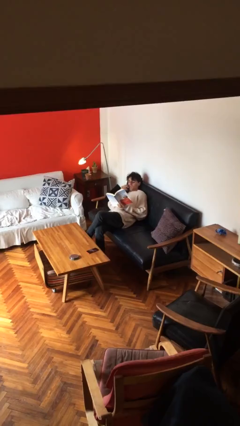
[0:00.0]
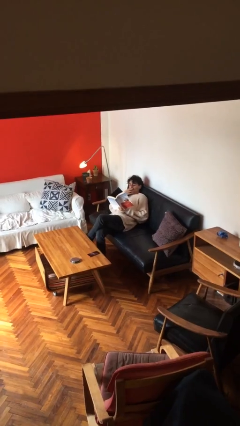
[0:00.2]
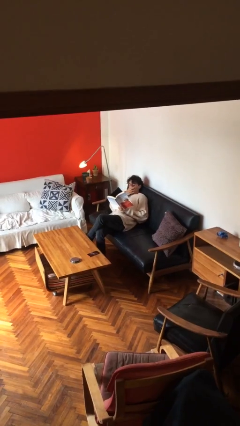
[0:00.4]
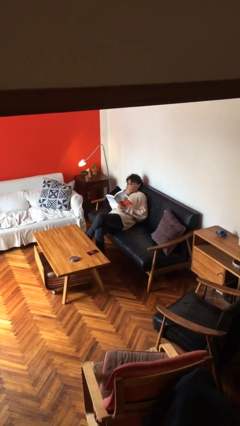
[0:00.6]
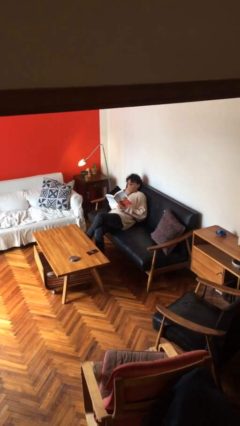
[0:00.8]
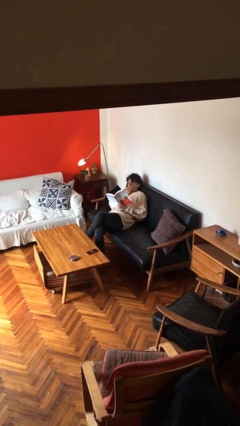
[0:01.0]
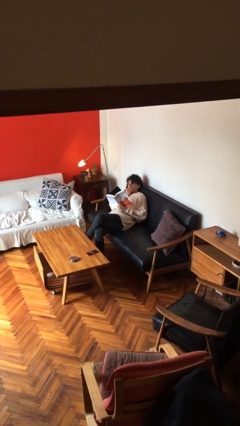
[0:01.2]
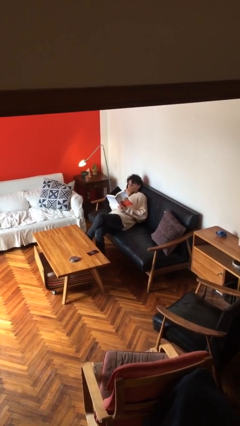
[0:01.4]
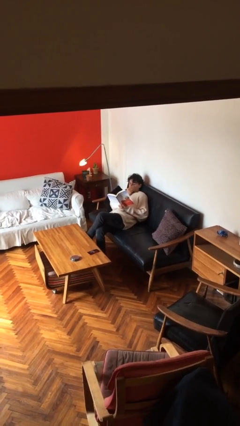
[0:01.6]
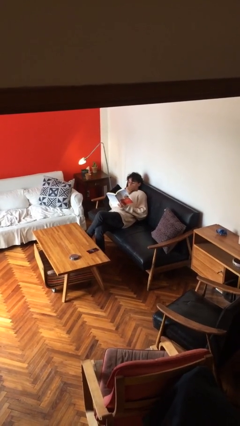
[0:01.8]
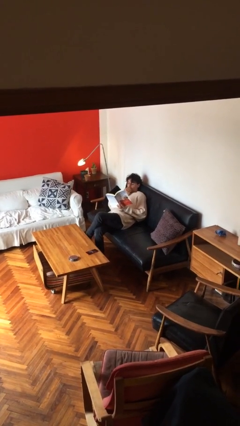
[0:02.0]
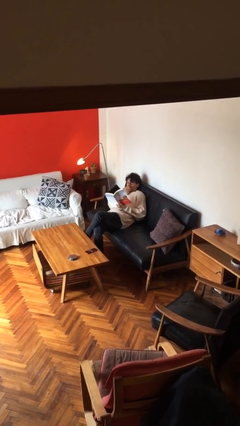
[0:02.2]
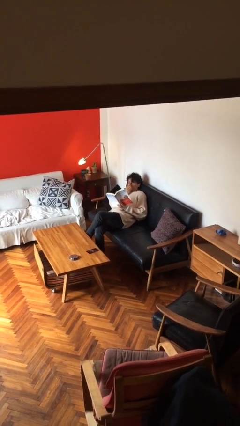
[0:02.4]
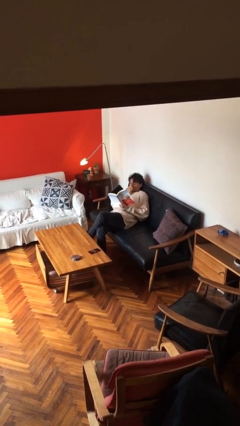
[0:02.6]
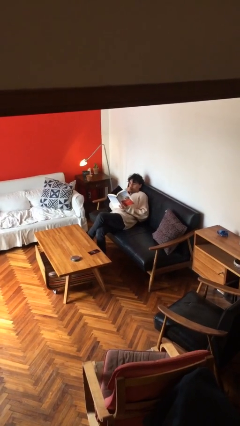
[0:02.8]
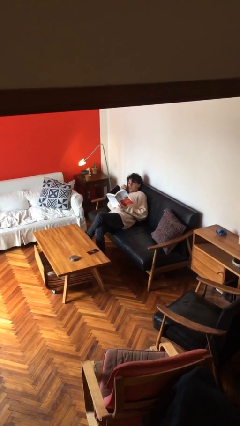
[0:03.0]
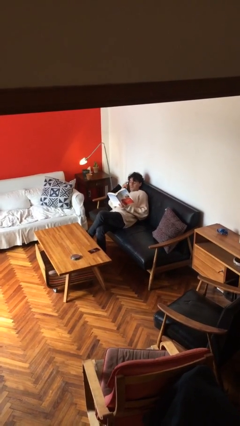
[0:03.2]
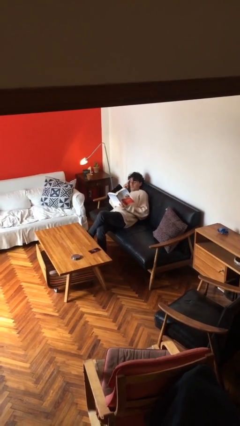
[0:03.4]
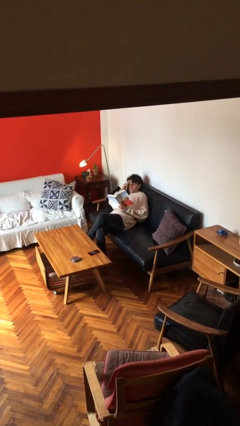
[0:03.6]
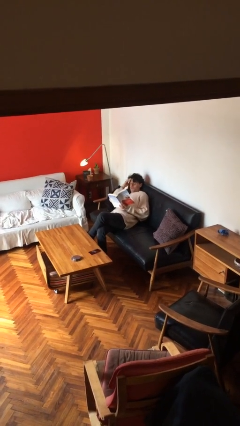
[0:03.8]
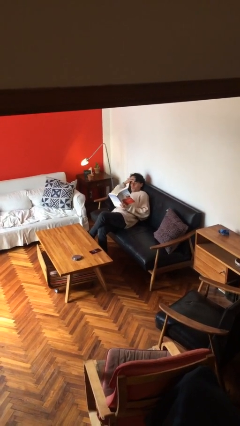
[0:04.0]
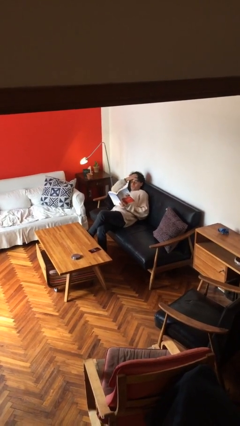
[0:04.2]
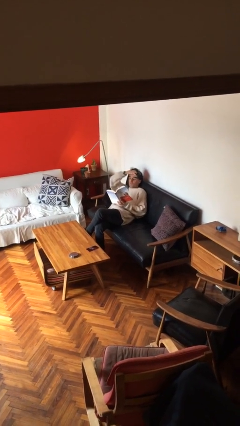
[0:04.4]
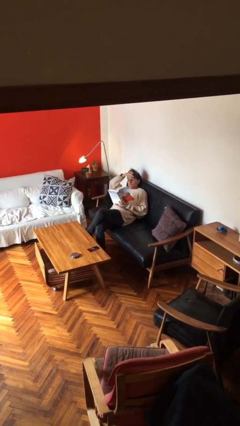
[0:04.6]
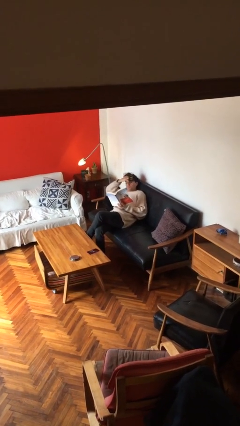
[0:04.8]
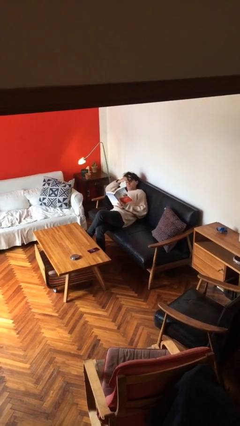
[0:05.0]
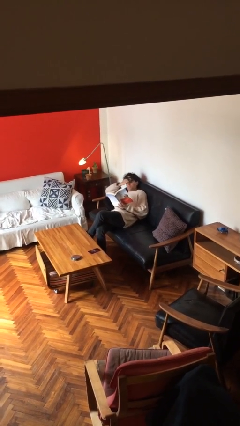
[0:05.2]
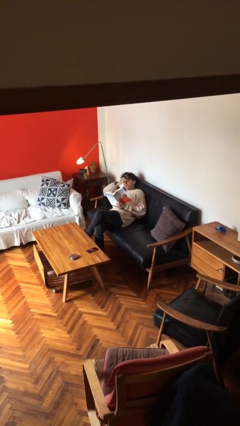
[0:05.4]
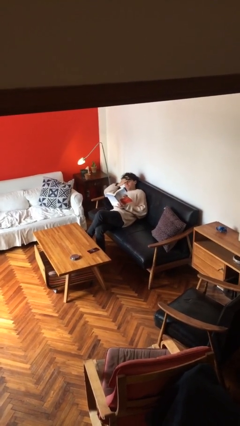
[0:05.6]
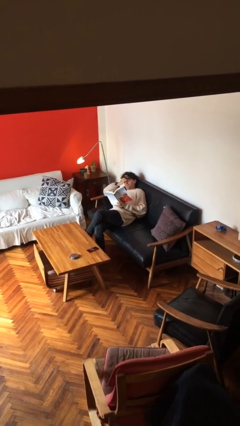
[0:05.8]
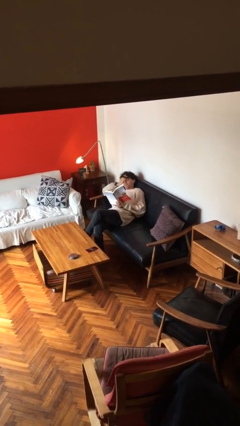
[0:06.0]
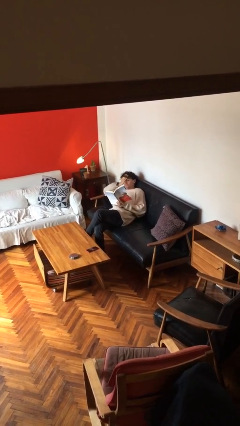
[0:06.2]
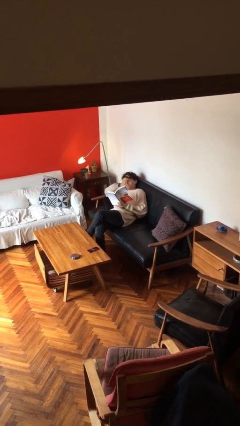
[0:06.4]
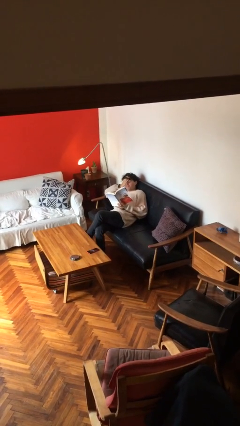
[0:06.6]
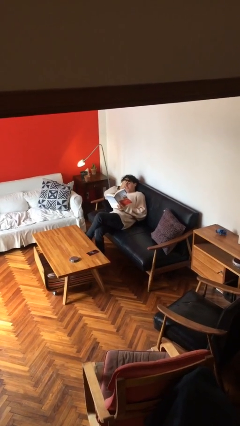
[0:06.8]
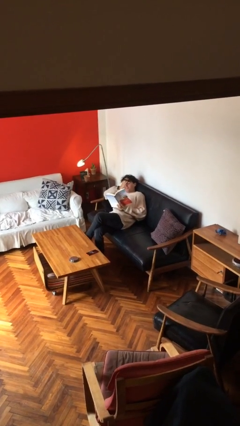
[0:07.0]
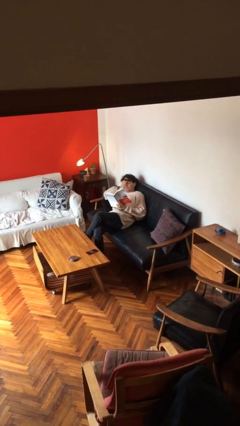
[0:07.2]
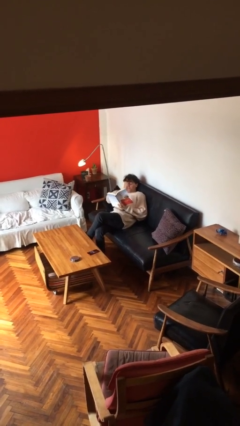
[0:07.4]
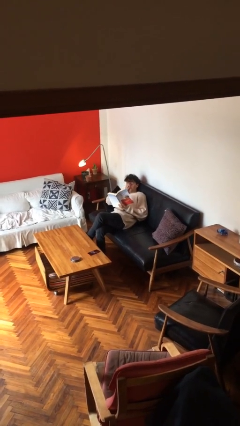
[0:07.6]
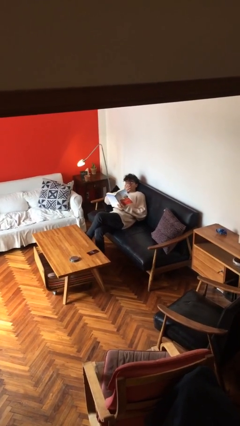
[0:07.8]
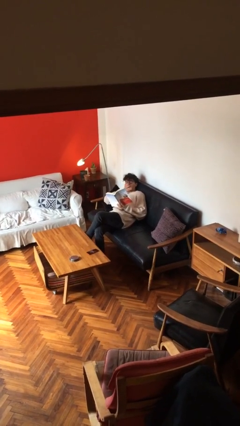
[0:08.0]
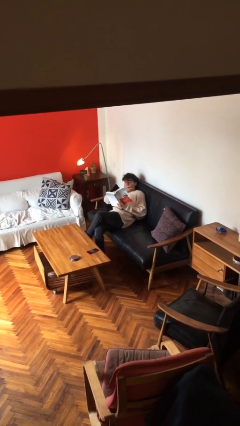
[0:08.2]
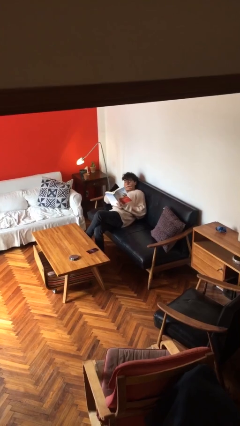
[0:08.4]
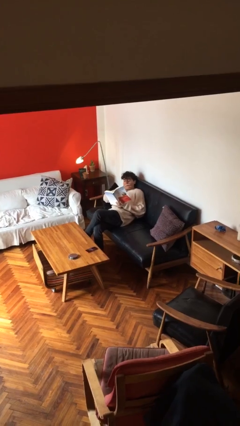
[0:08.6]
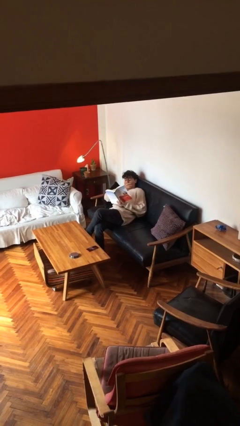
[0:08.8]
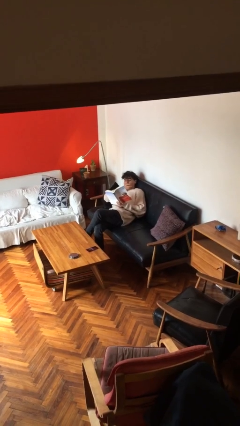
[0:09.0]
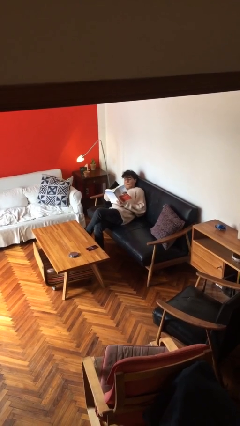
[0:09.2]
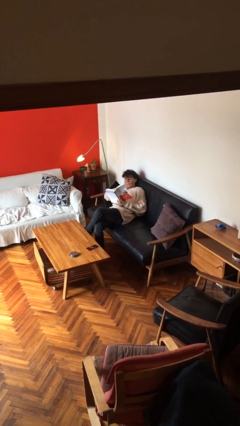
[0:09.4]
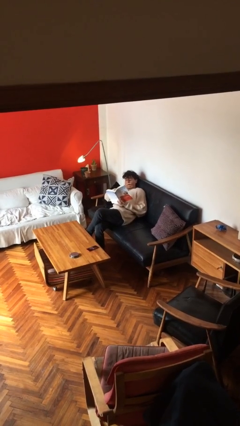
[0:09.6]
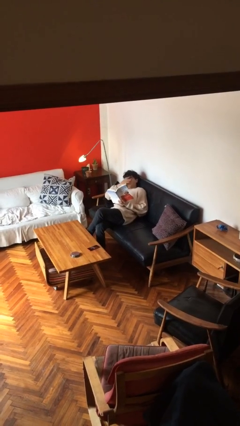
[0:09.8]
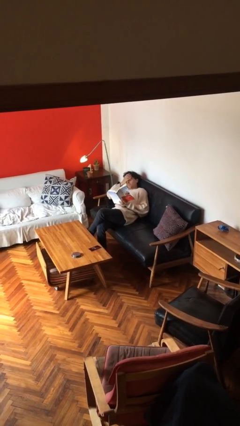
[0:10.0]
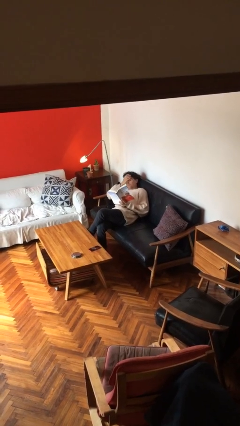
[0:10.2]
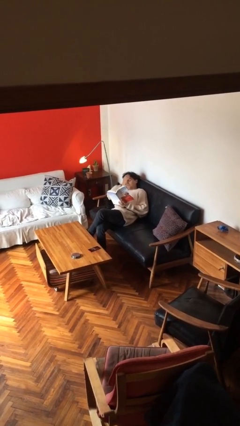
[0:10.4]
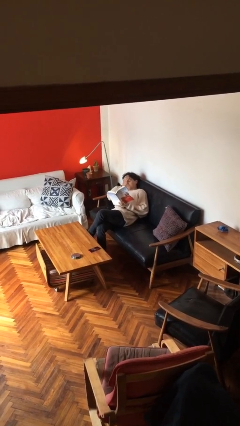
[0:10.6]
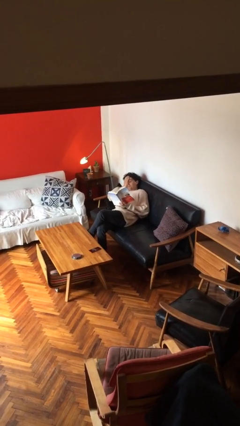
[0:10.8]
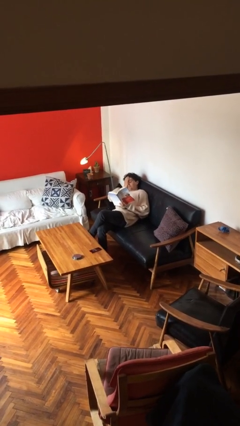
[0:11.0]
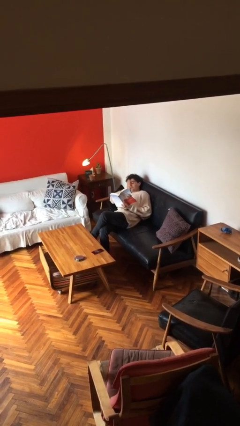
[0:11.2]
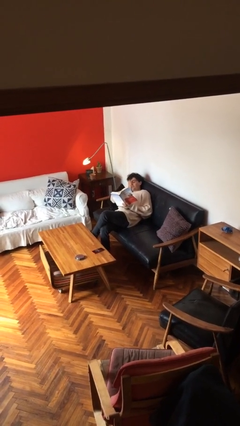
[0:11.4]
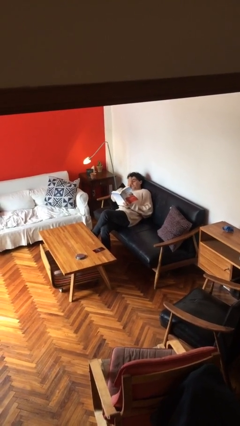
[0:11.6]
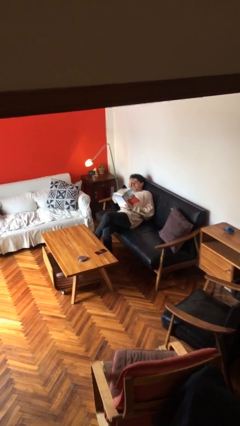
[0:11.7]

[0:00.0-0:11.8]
person reads document

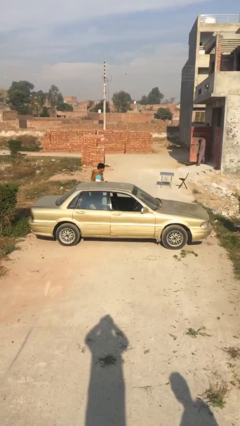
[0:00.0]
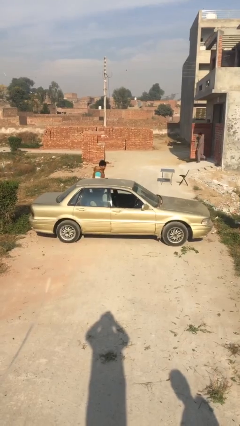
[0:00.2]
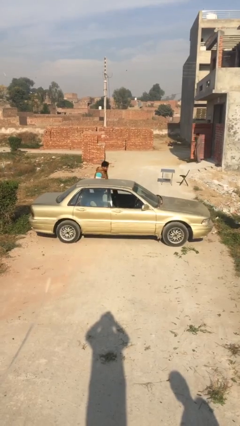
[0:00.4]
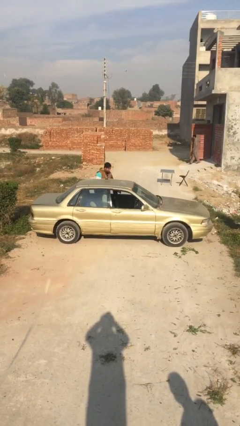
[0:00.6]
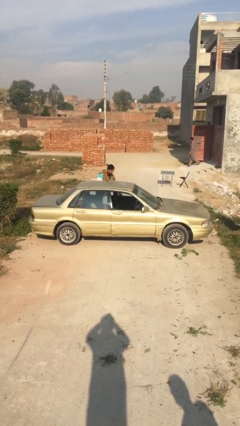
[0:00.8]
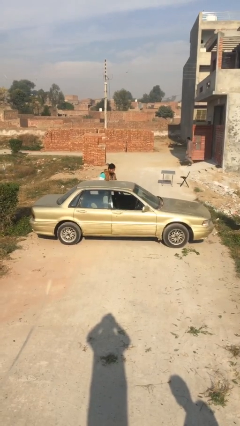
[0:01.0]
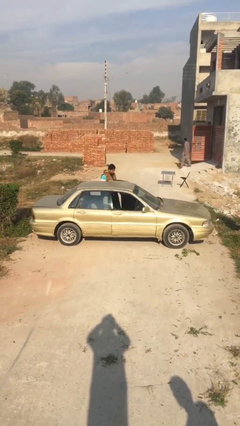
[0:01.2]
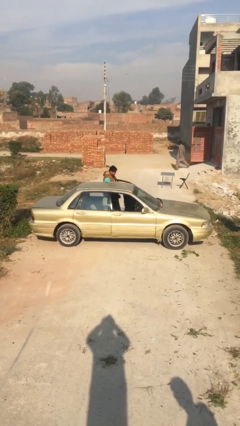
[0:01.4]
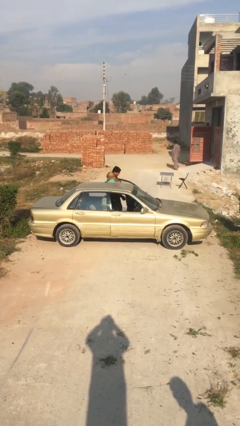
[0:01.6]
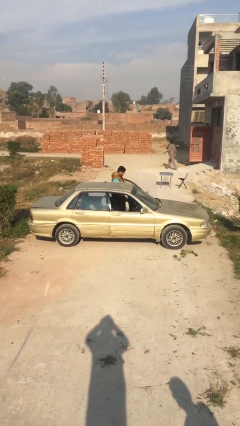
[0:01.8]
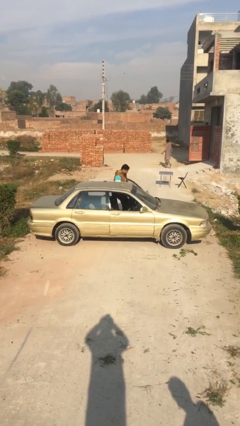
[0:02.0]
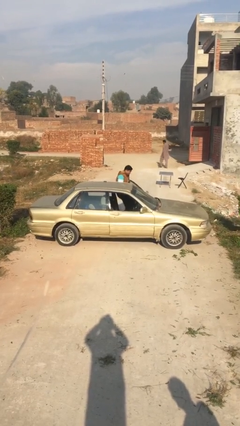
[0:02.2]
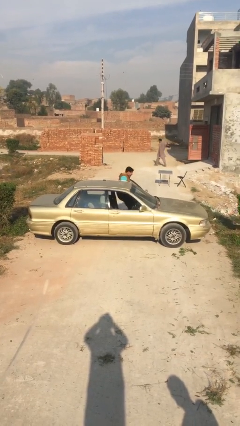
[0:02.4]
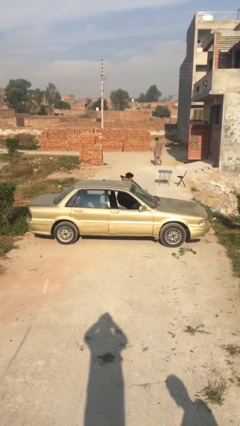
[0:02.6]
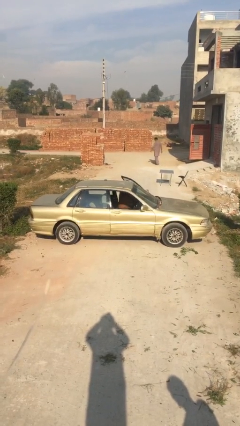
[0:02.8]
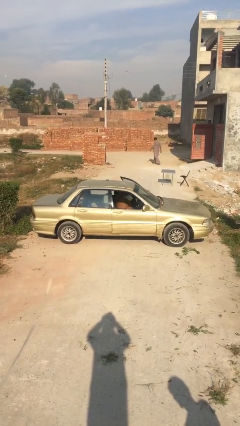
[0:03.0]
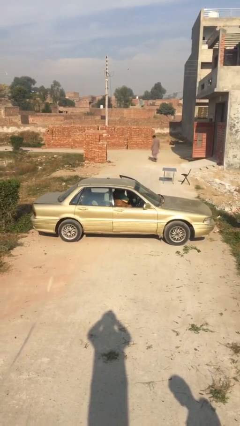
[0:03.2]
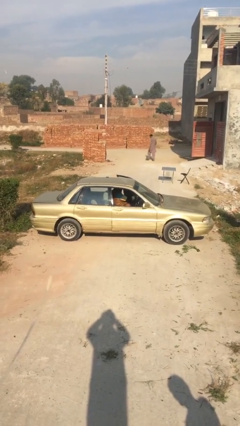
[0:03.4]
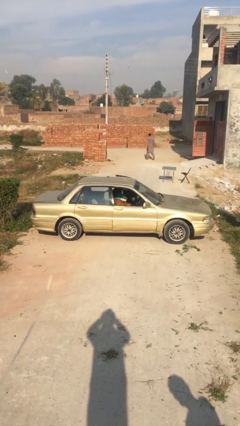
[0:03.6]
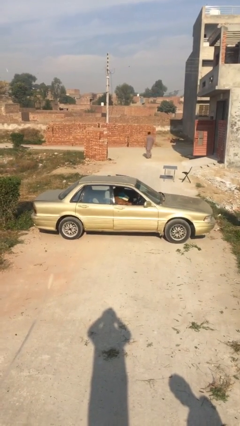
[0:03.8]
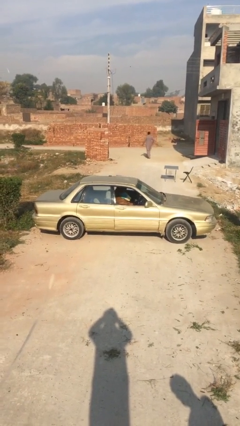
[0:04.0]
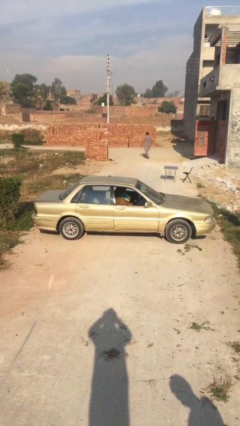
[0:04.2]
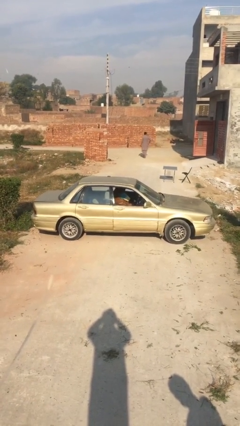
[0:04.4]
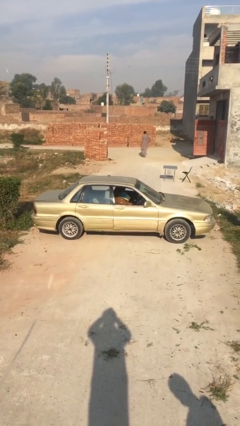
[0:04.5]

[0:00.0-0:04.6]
car picks up person

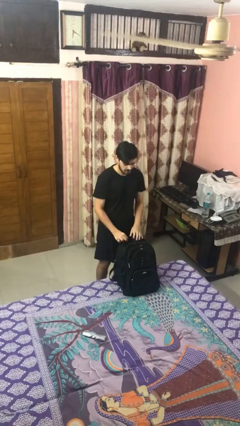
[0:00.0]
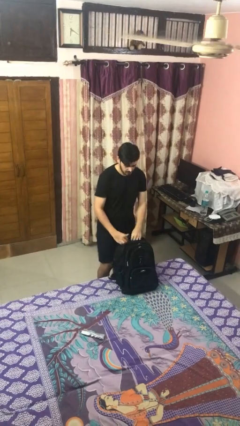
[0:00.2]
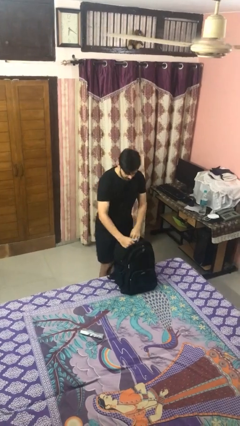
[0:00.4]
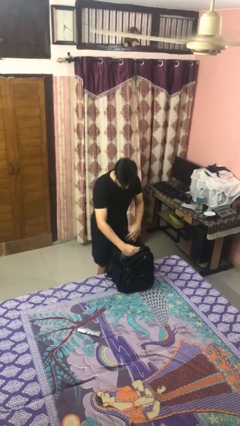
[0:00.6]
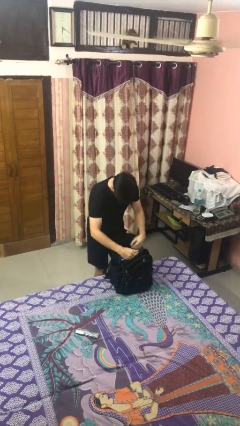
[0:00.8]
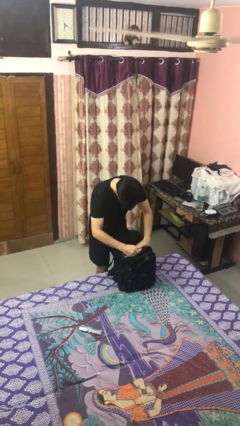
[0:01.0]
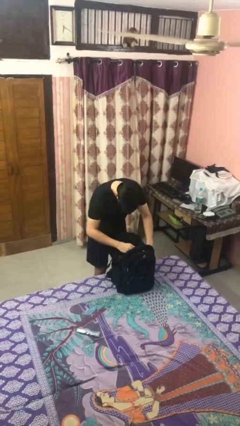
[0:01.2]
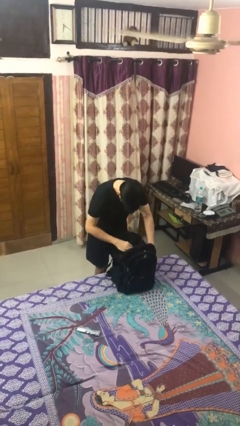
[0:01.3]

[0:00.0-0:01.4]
person searches in backpack

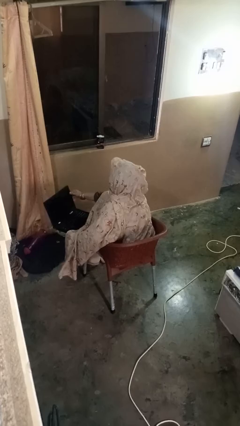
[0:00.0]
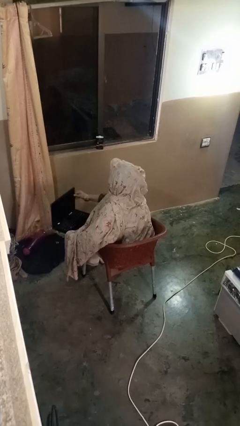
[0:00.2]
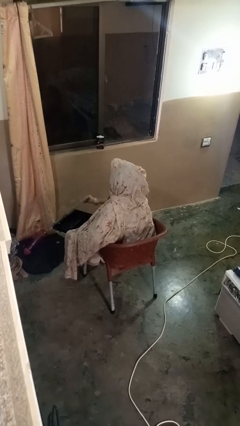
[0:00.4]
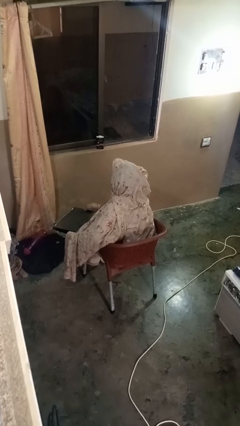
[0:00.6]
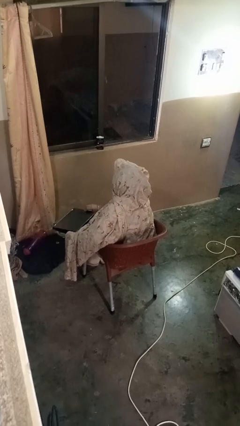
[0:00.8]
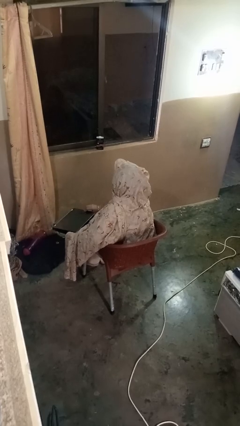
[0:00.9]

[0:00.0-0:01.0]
person closes laptop
